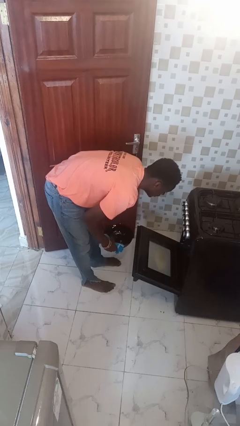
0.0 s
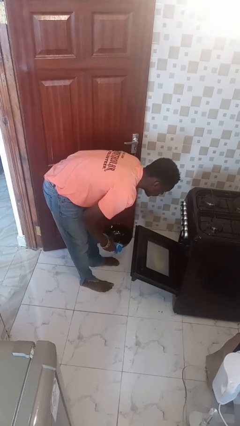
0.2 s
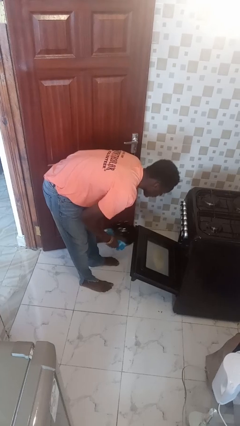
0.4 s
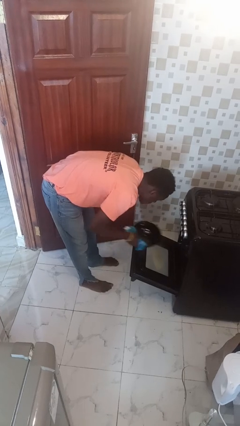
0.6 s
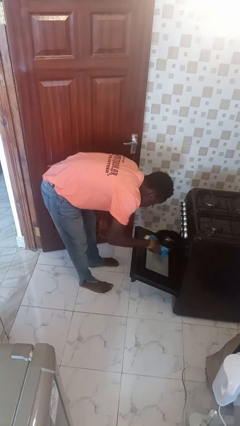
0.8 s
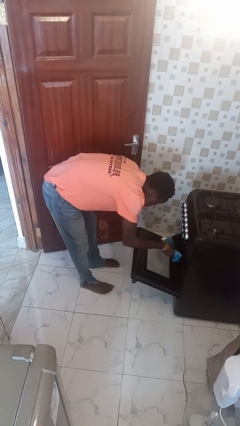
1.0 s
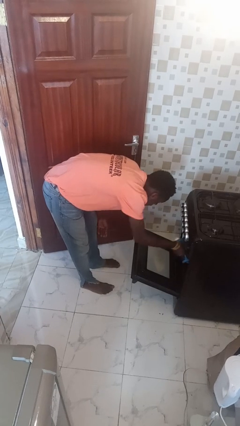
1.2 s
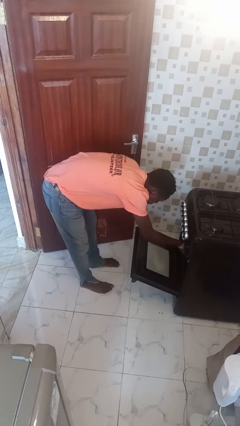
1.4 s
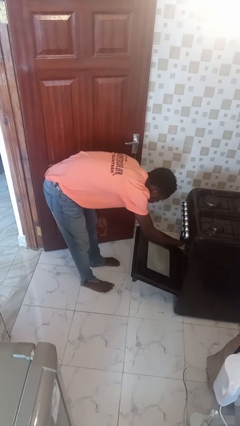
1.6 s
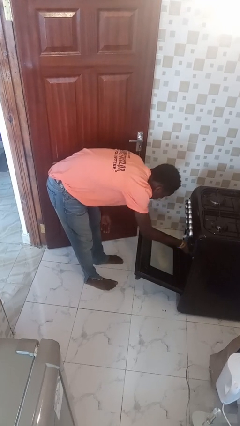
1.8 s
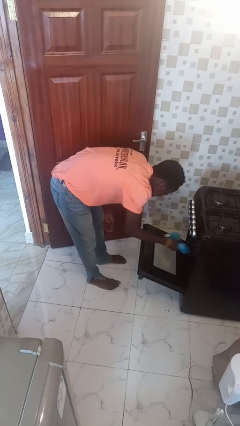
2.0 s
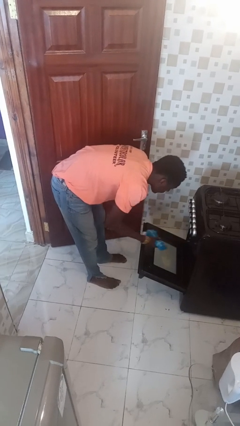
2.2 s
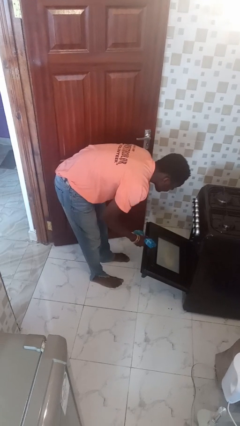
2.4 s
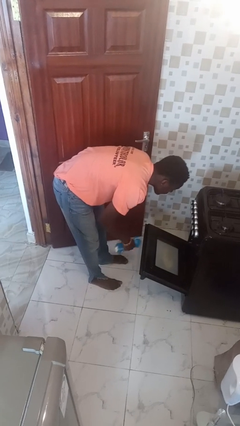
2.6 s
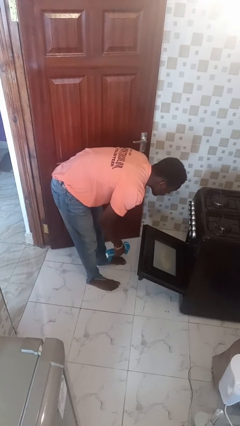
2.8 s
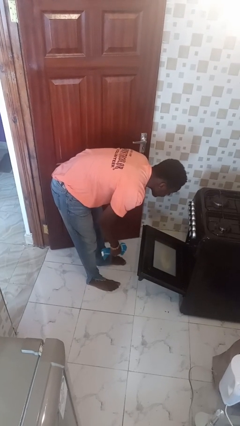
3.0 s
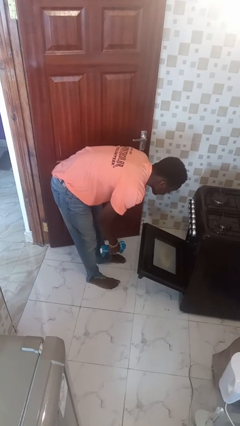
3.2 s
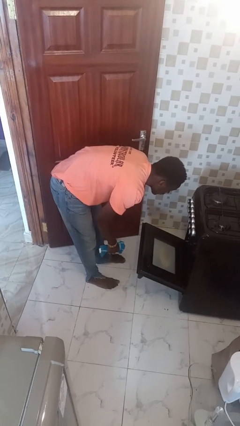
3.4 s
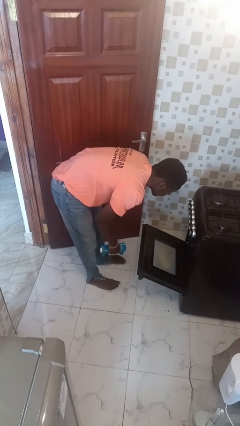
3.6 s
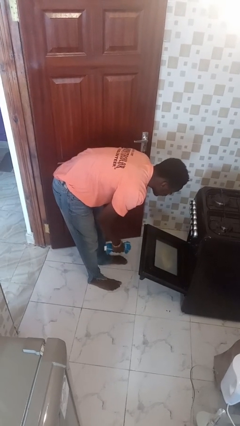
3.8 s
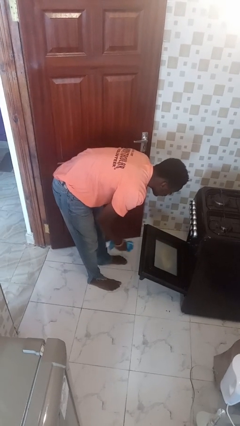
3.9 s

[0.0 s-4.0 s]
person puts object into oven

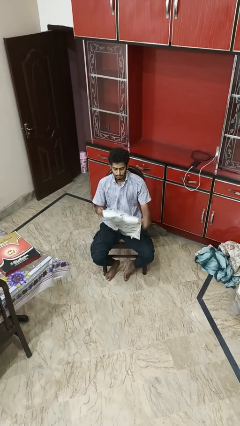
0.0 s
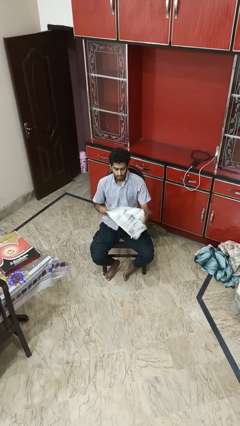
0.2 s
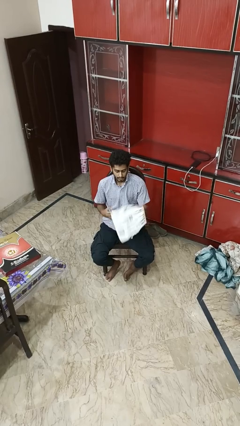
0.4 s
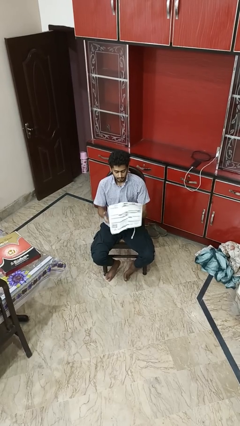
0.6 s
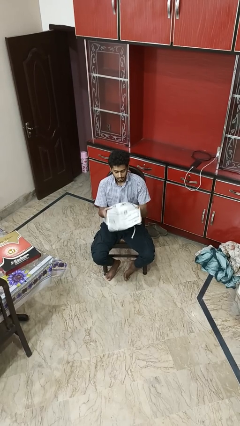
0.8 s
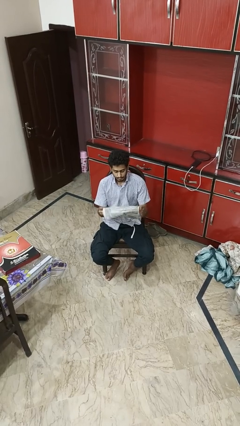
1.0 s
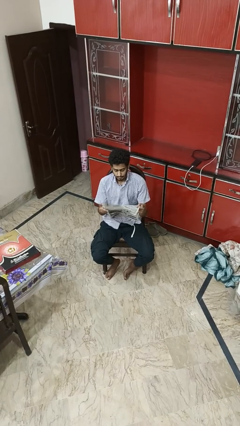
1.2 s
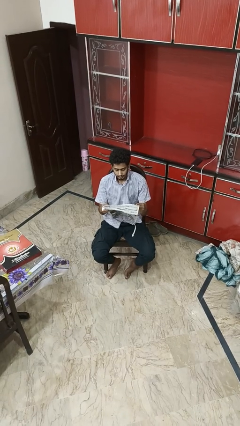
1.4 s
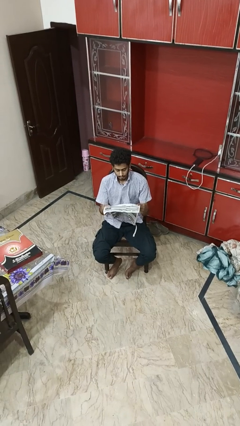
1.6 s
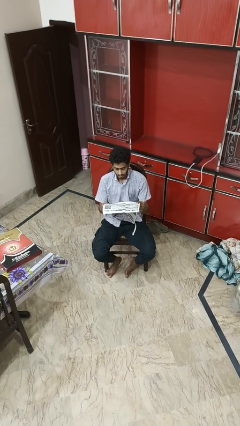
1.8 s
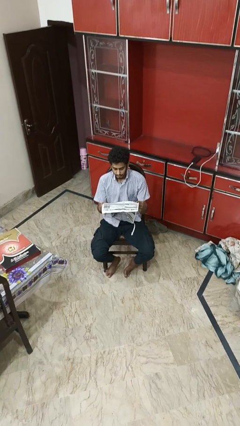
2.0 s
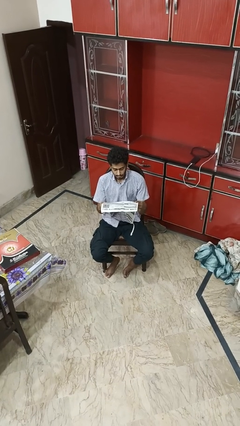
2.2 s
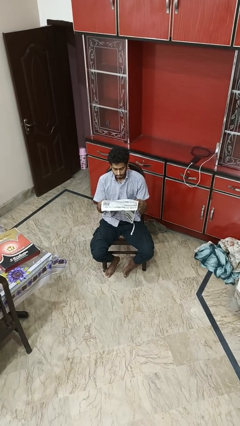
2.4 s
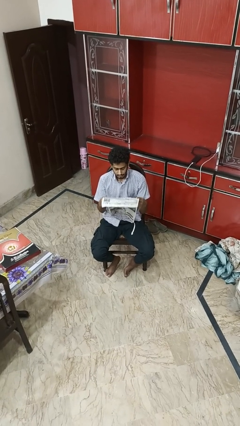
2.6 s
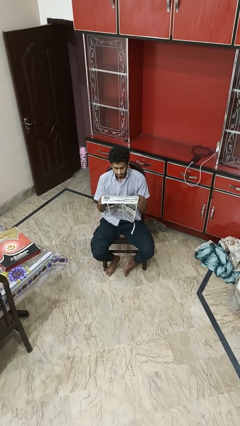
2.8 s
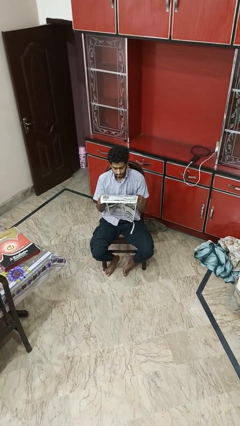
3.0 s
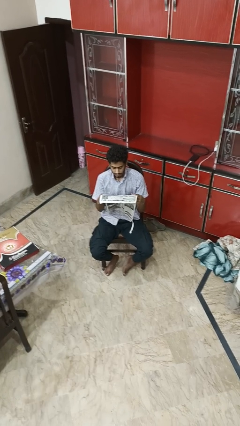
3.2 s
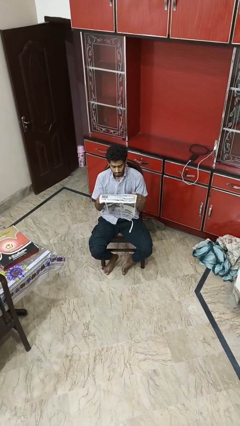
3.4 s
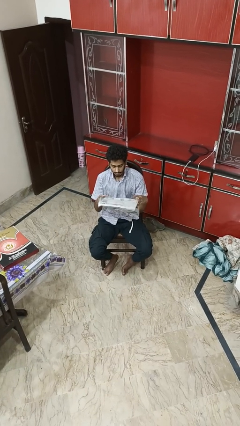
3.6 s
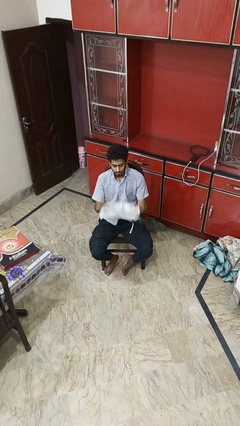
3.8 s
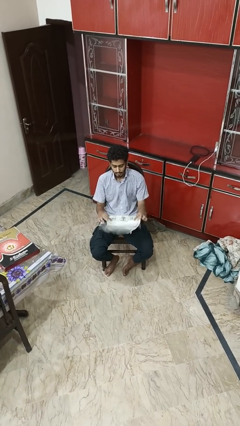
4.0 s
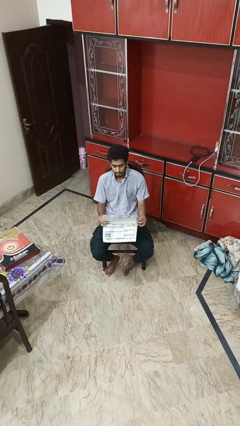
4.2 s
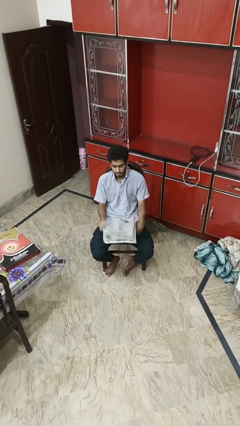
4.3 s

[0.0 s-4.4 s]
person reads newspaper

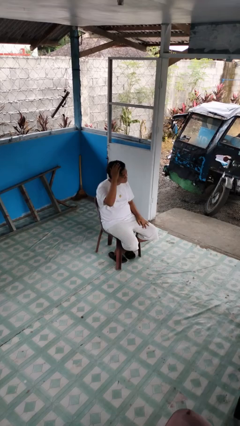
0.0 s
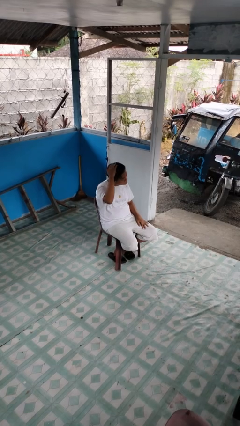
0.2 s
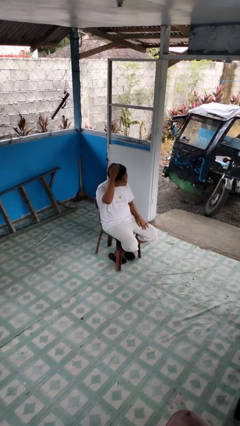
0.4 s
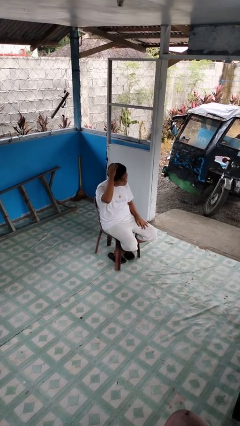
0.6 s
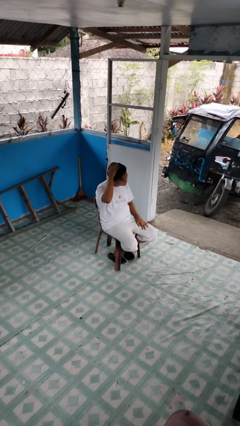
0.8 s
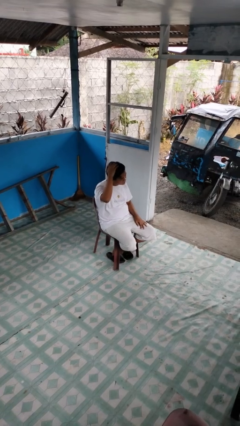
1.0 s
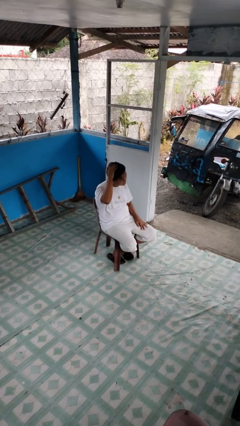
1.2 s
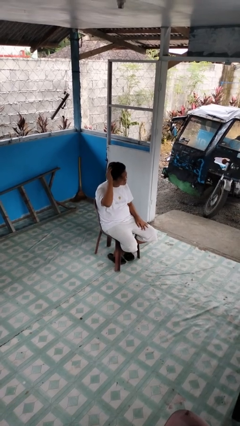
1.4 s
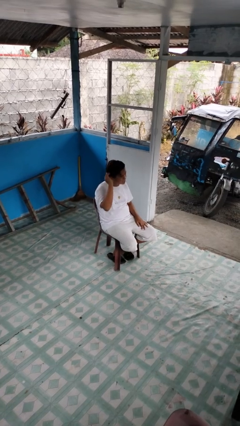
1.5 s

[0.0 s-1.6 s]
person pats head

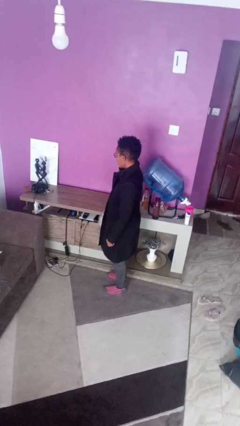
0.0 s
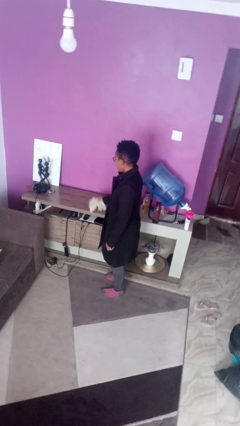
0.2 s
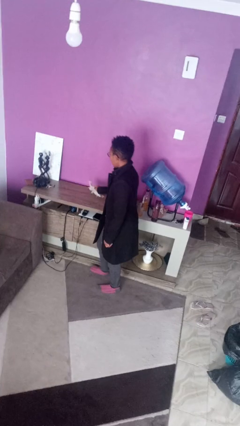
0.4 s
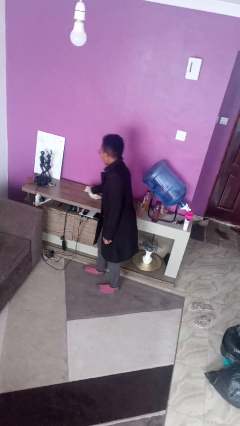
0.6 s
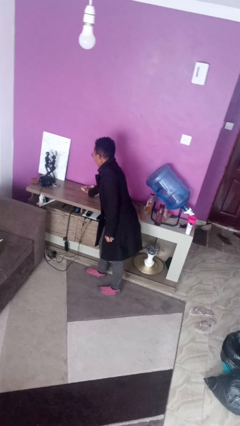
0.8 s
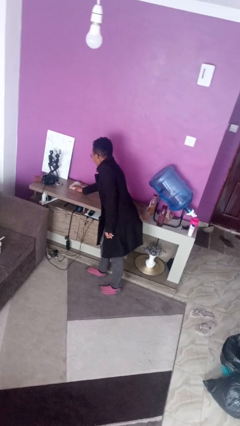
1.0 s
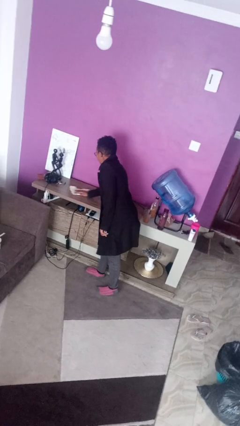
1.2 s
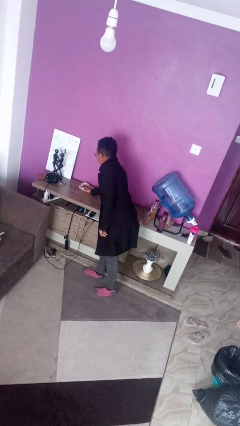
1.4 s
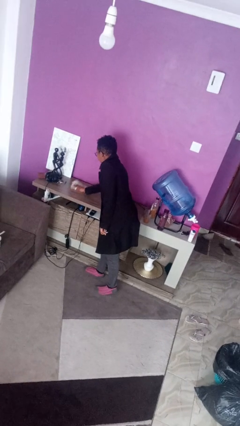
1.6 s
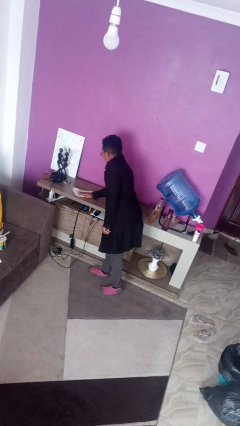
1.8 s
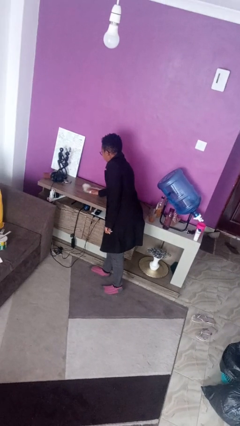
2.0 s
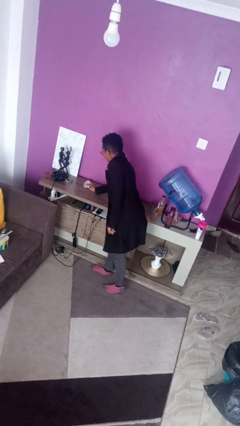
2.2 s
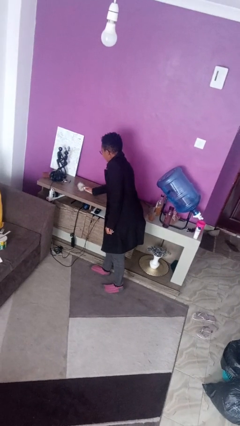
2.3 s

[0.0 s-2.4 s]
person cleans table with rag

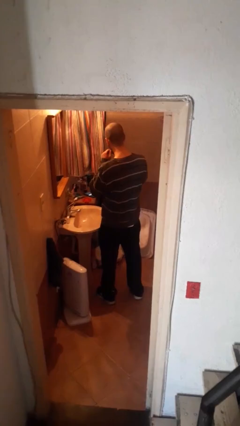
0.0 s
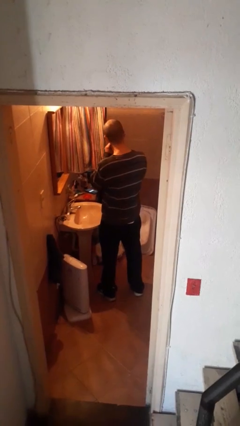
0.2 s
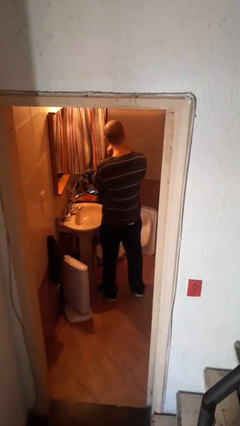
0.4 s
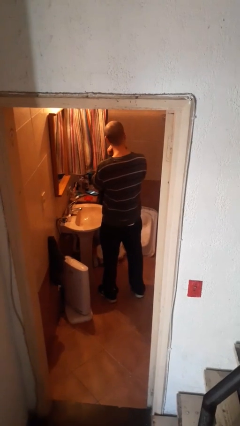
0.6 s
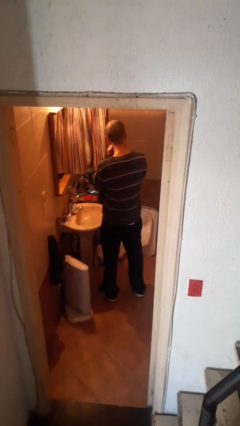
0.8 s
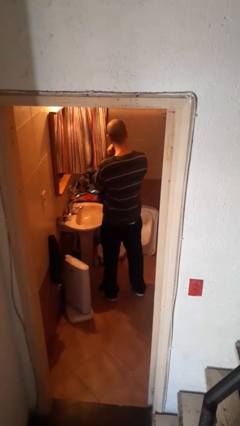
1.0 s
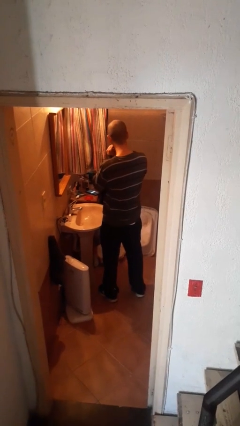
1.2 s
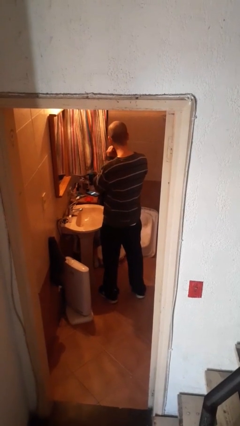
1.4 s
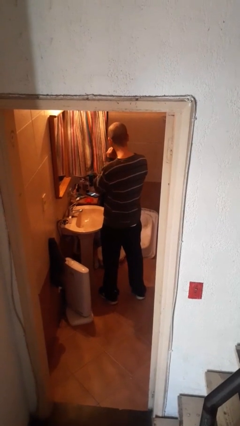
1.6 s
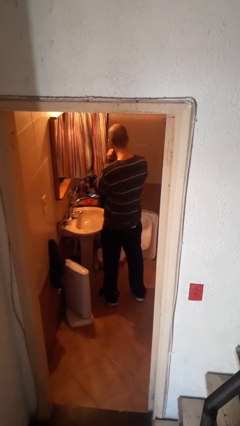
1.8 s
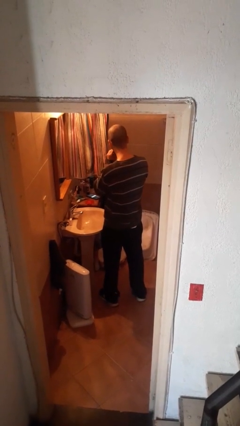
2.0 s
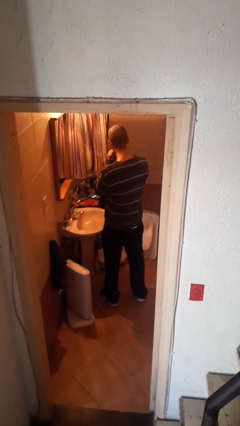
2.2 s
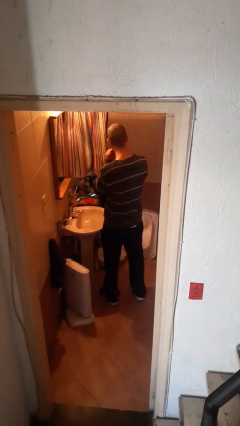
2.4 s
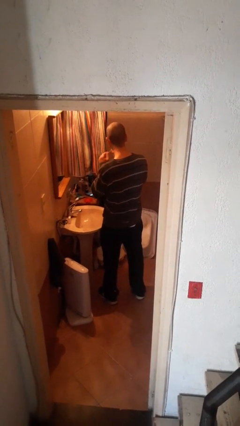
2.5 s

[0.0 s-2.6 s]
person flosses

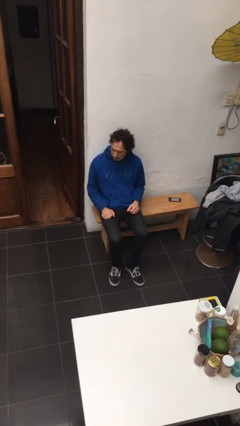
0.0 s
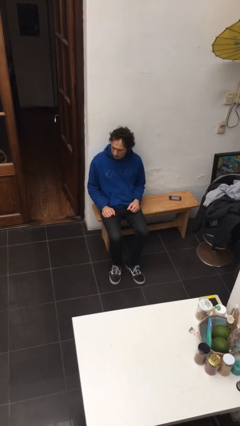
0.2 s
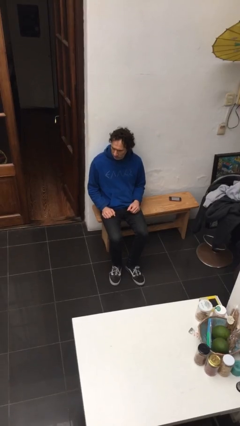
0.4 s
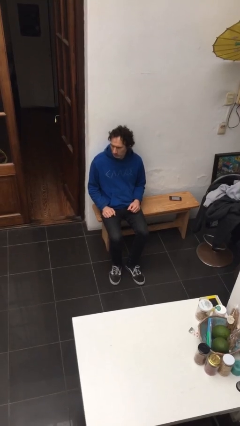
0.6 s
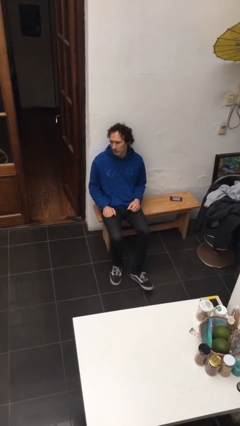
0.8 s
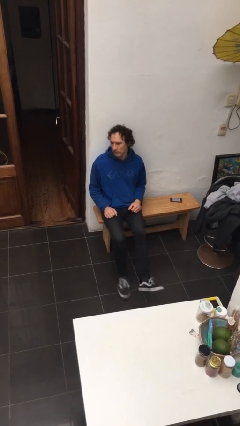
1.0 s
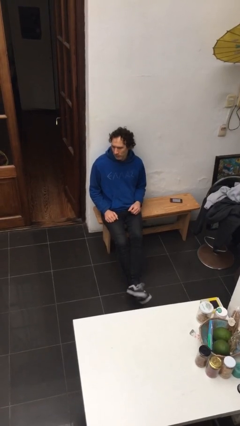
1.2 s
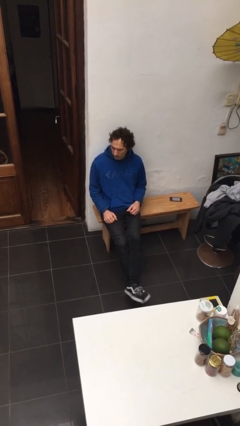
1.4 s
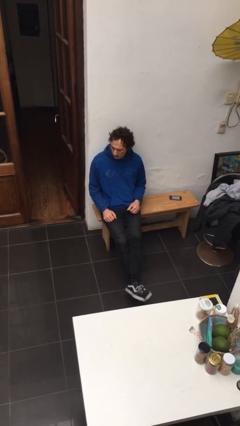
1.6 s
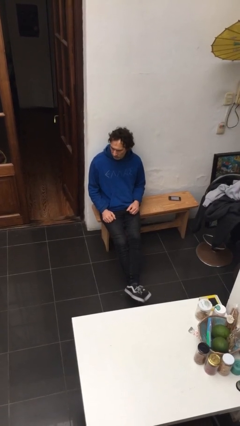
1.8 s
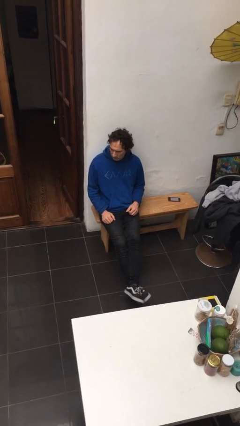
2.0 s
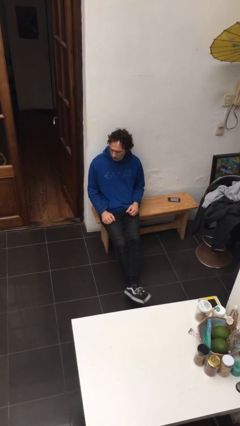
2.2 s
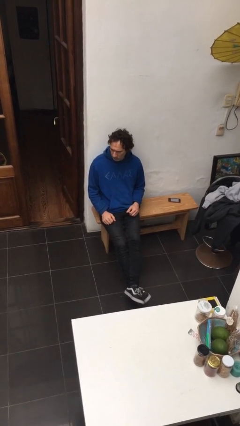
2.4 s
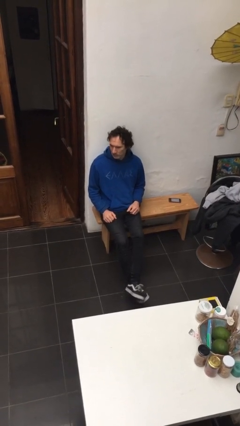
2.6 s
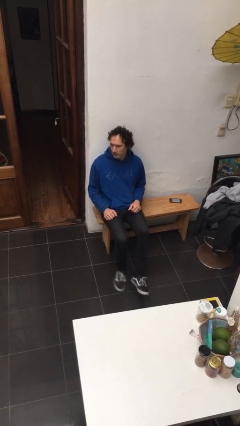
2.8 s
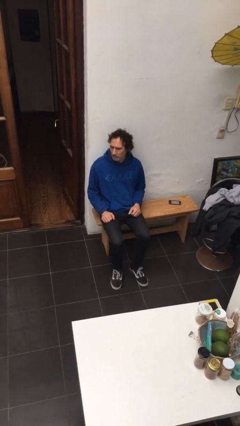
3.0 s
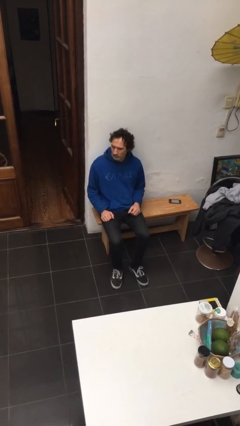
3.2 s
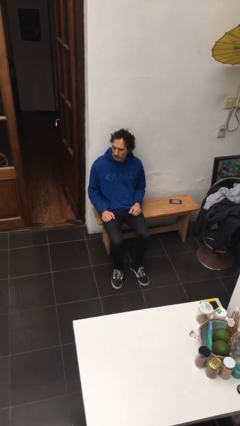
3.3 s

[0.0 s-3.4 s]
person crosses legs
